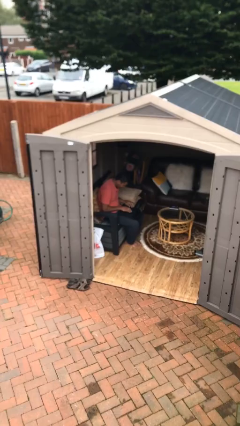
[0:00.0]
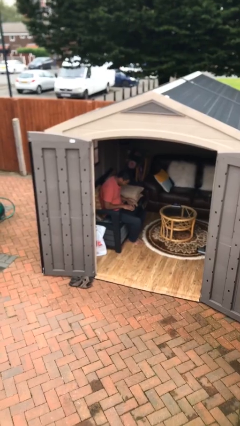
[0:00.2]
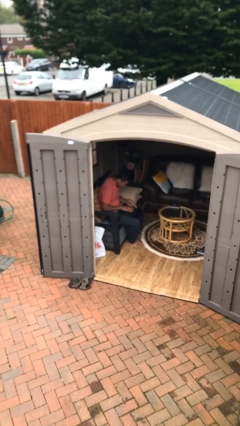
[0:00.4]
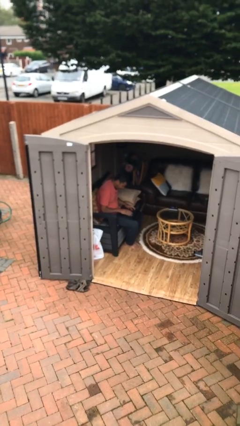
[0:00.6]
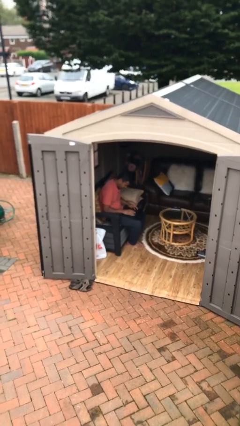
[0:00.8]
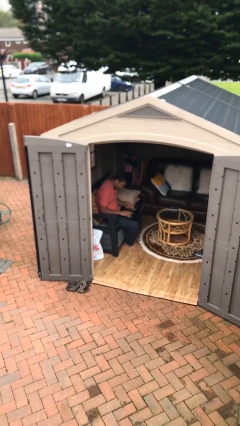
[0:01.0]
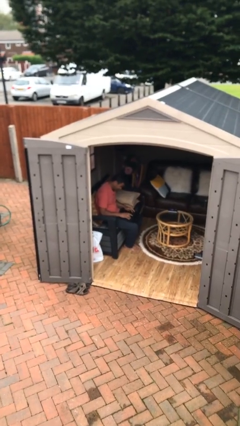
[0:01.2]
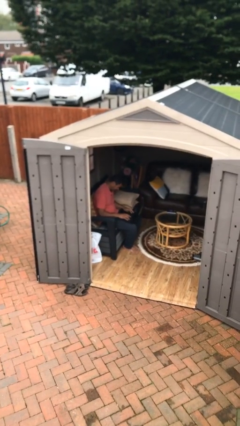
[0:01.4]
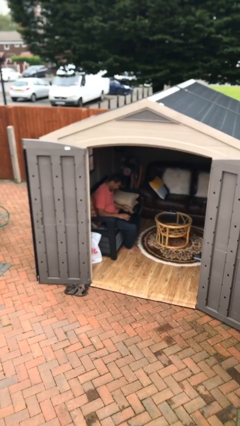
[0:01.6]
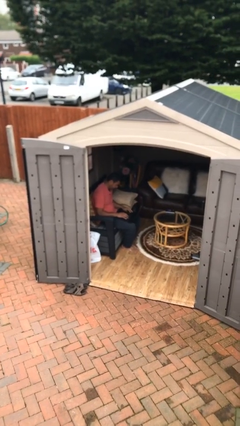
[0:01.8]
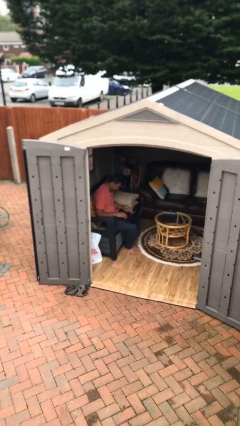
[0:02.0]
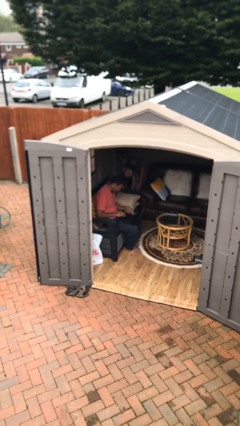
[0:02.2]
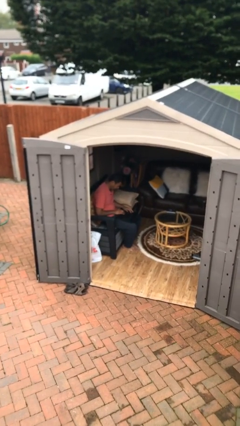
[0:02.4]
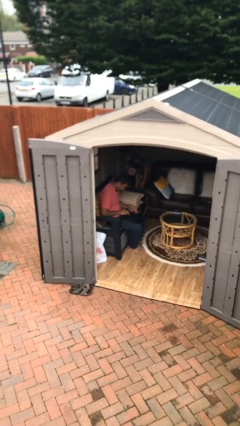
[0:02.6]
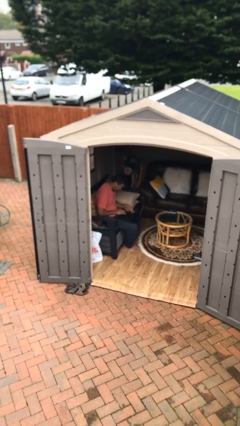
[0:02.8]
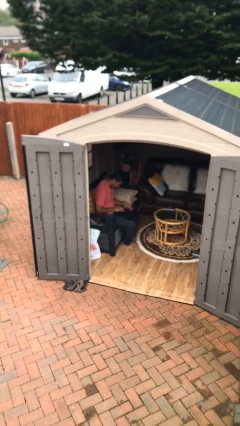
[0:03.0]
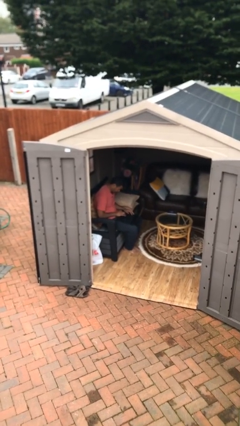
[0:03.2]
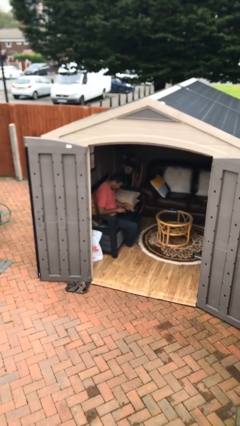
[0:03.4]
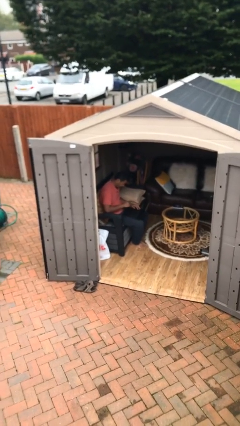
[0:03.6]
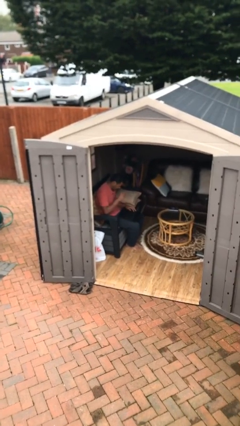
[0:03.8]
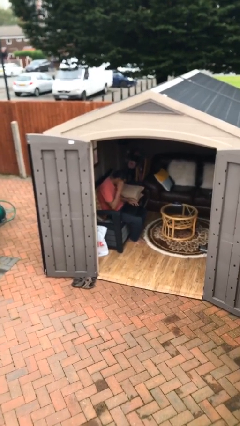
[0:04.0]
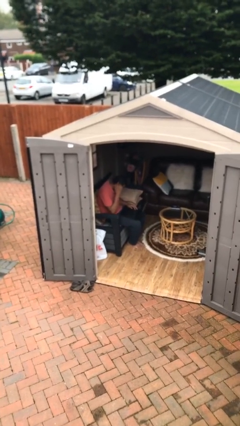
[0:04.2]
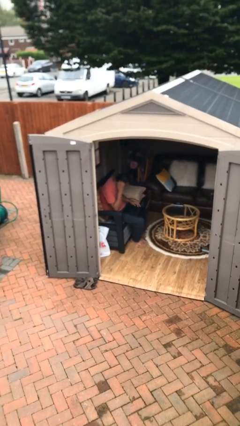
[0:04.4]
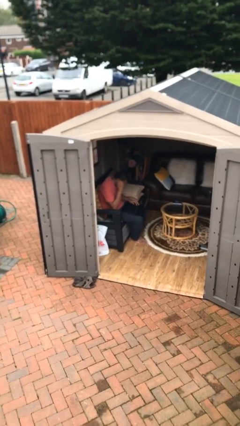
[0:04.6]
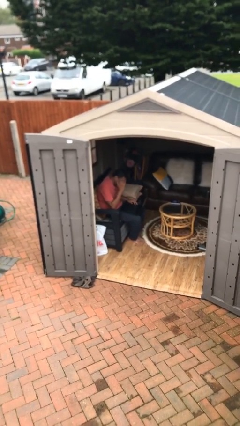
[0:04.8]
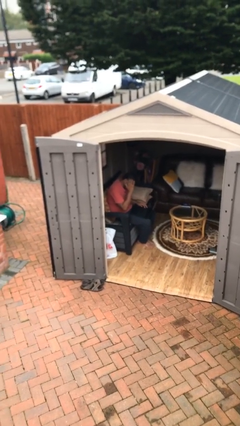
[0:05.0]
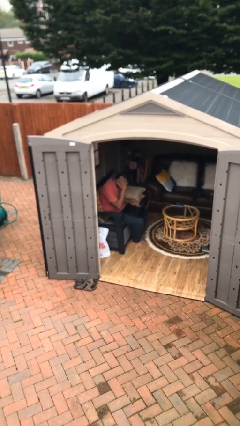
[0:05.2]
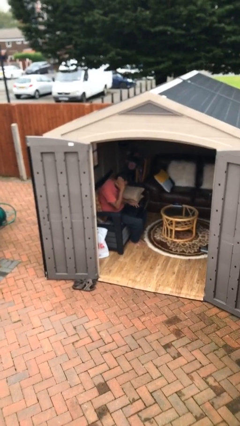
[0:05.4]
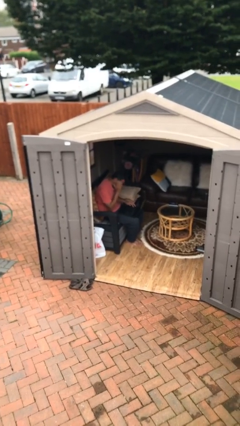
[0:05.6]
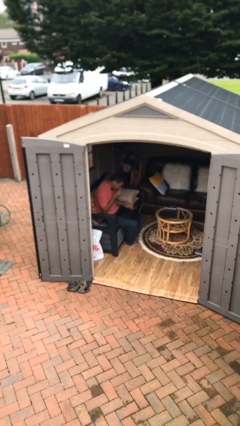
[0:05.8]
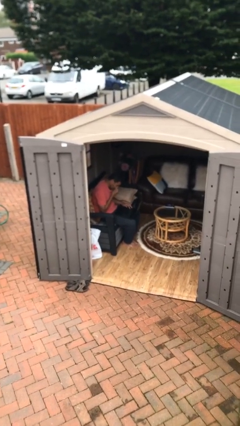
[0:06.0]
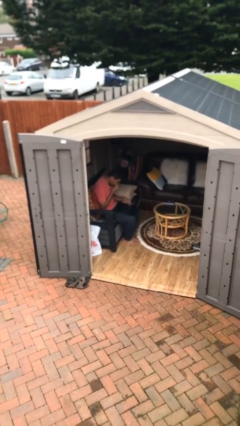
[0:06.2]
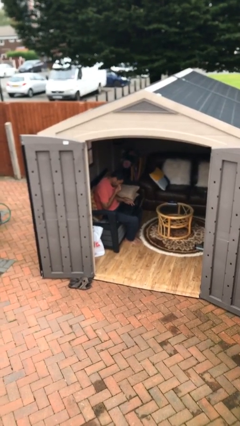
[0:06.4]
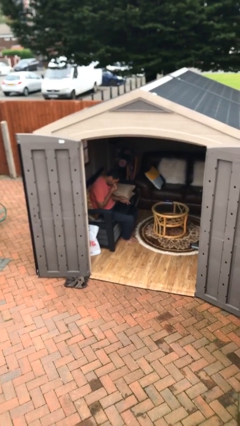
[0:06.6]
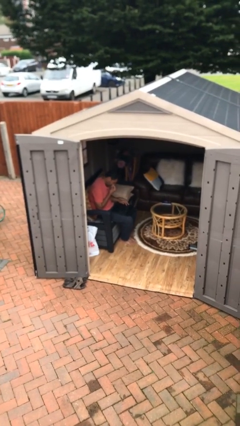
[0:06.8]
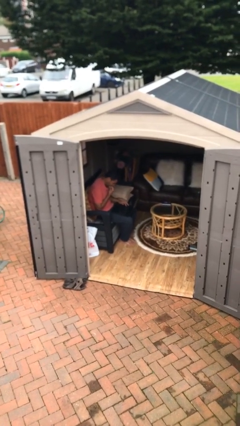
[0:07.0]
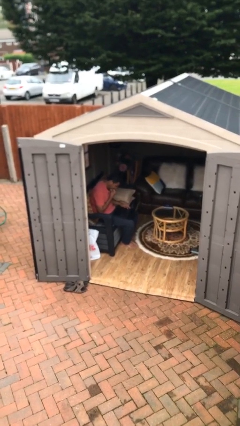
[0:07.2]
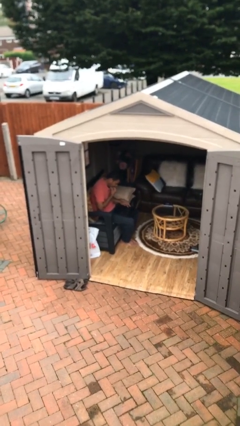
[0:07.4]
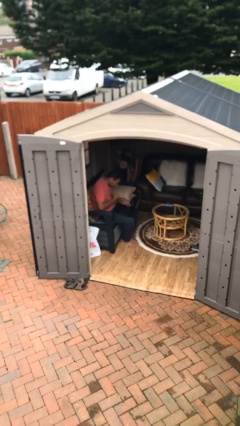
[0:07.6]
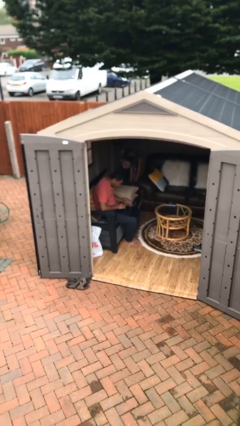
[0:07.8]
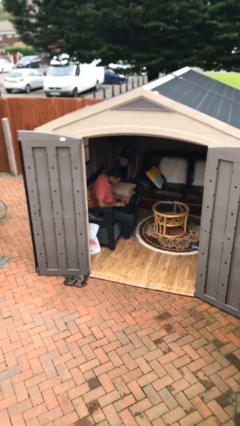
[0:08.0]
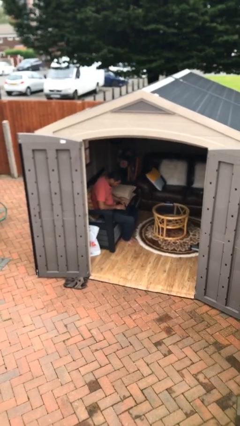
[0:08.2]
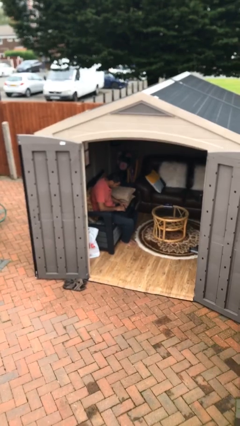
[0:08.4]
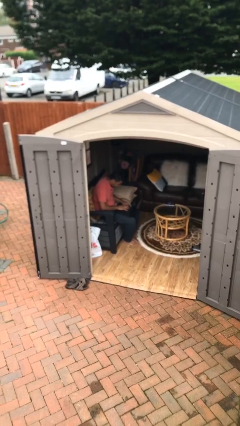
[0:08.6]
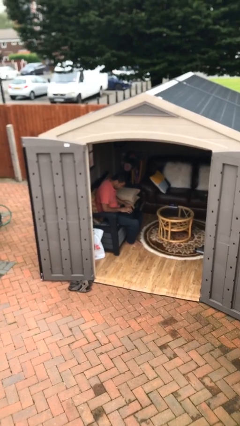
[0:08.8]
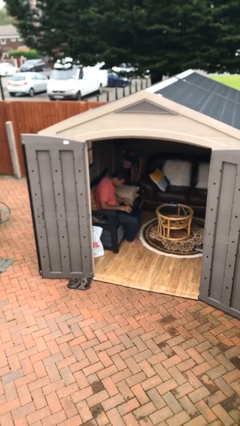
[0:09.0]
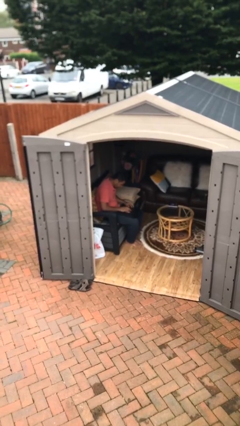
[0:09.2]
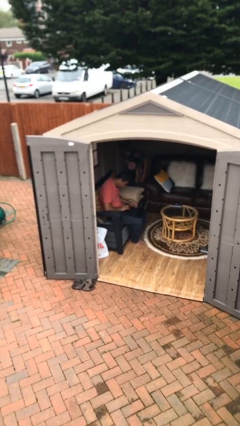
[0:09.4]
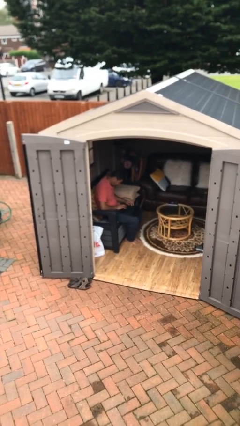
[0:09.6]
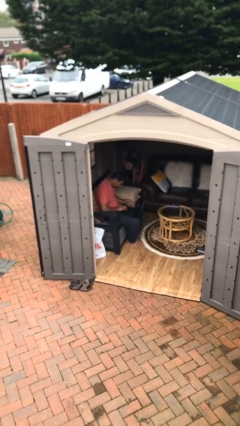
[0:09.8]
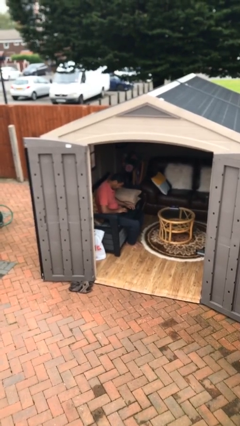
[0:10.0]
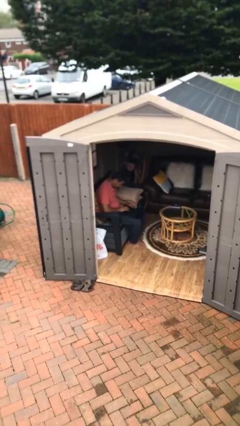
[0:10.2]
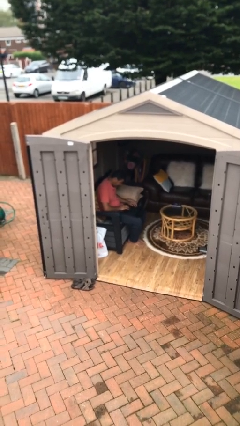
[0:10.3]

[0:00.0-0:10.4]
person interacts with laptop

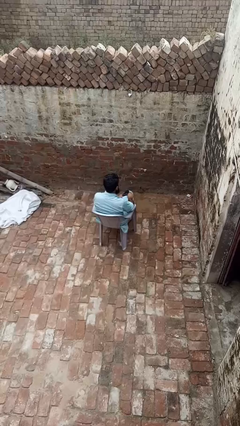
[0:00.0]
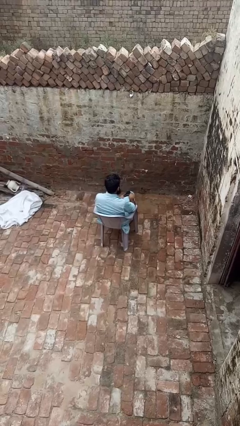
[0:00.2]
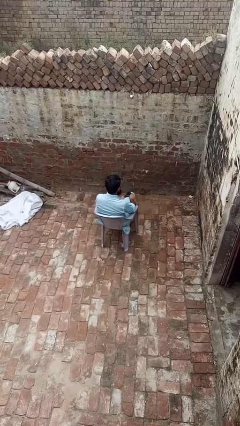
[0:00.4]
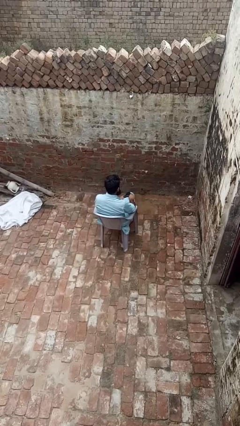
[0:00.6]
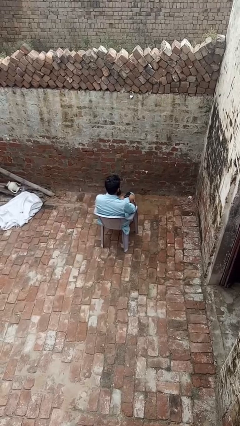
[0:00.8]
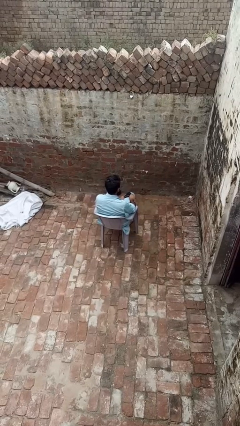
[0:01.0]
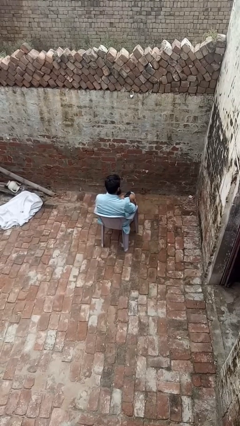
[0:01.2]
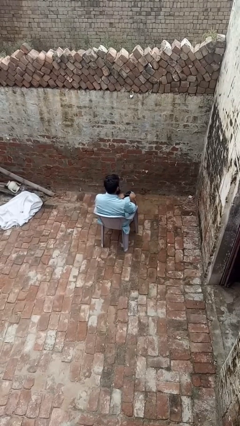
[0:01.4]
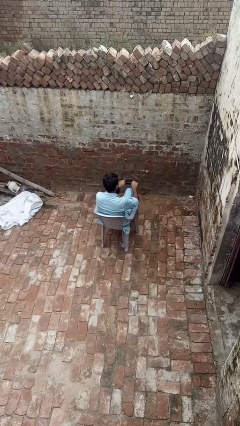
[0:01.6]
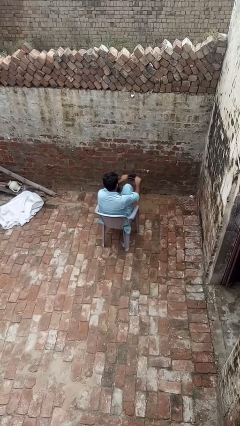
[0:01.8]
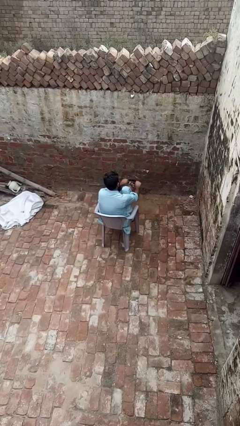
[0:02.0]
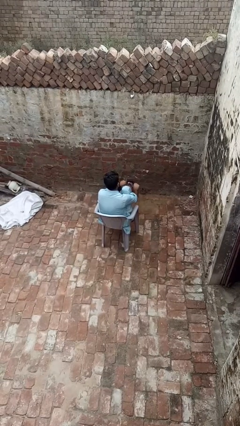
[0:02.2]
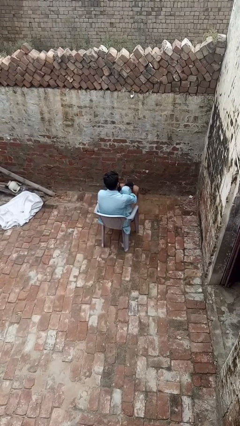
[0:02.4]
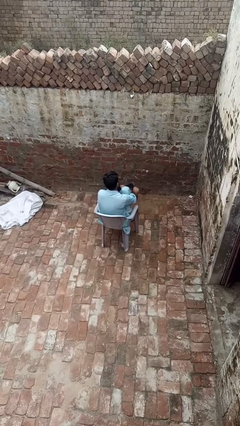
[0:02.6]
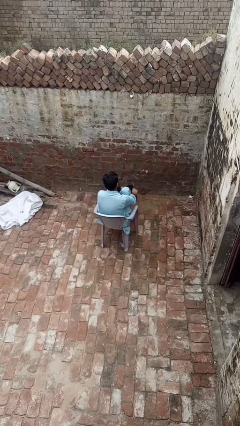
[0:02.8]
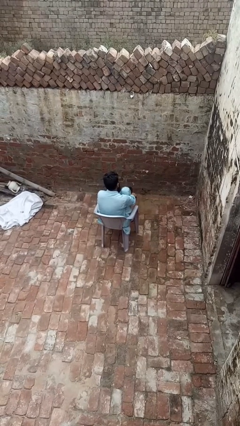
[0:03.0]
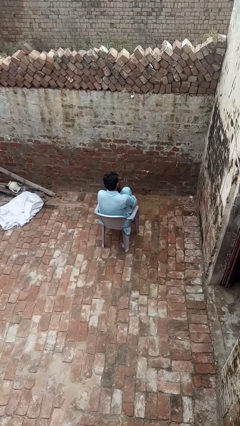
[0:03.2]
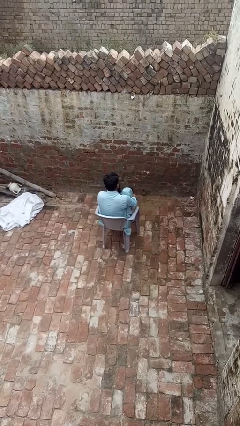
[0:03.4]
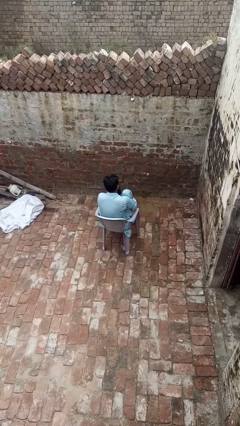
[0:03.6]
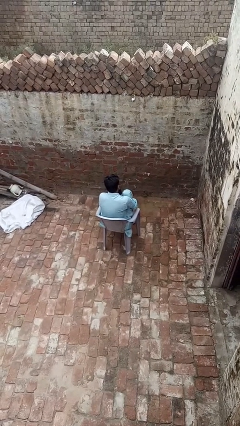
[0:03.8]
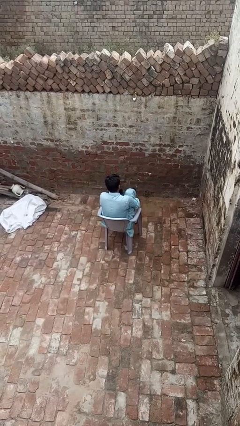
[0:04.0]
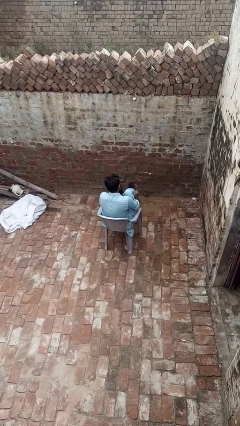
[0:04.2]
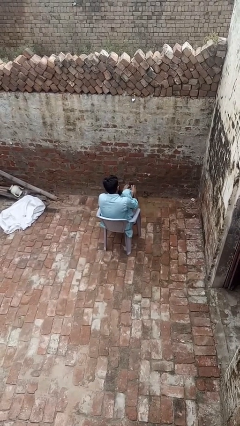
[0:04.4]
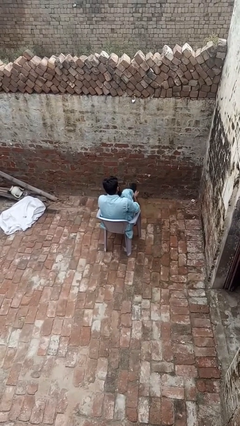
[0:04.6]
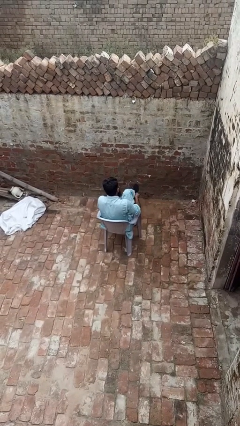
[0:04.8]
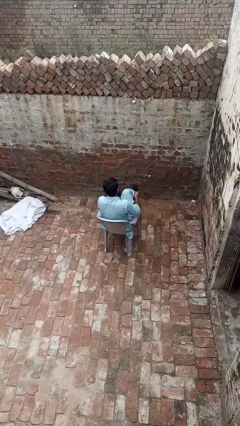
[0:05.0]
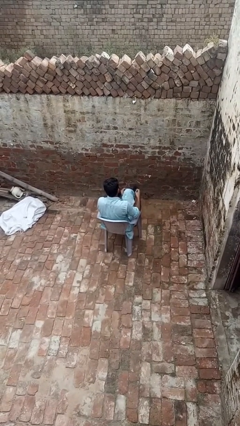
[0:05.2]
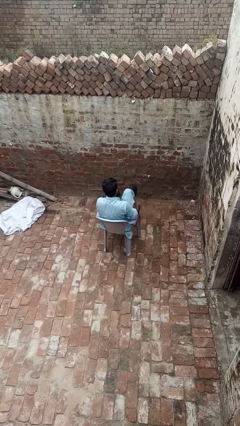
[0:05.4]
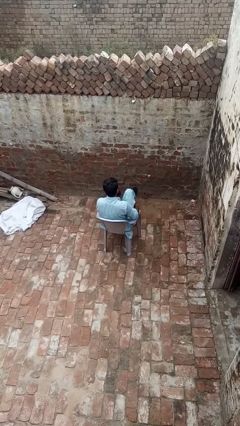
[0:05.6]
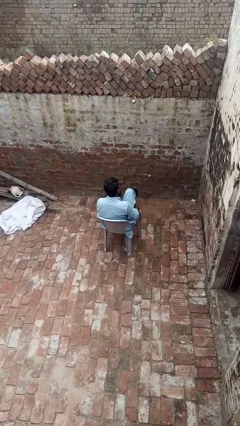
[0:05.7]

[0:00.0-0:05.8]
person puts on socks

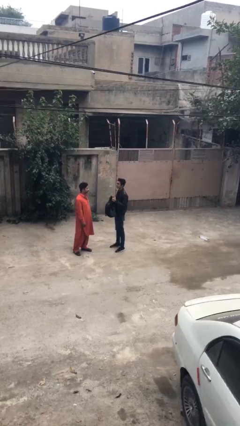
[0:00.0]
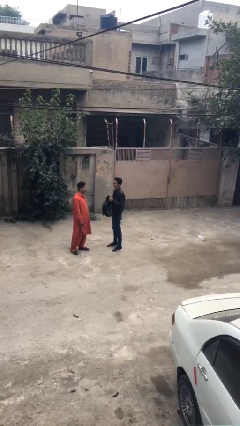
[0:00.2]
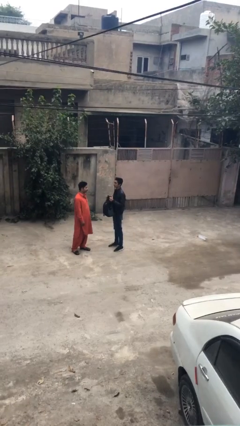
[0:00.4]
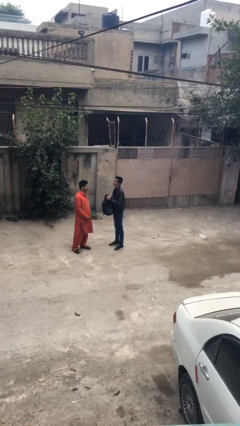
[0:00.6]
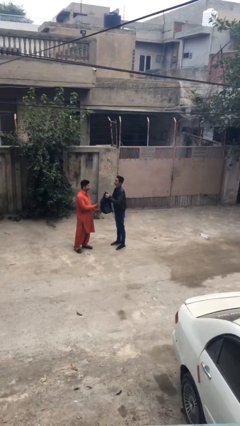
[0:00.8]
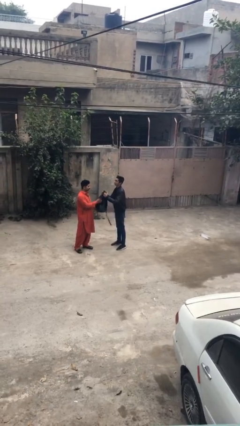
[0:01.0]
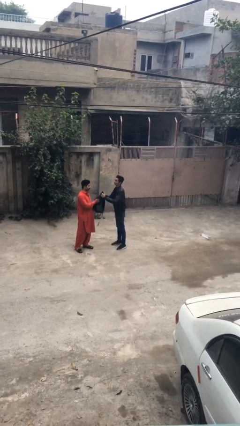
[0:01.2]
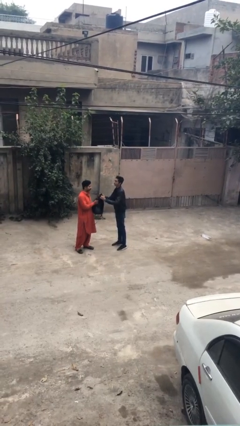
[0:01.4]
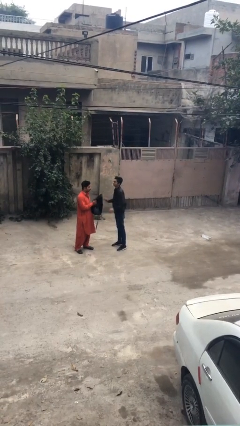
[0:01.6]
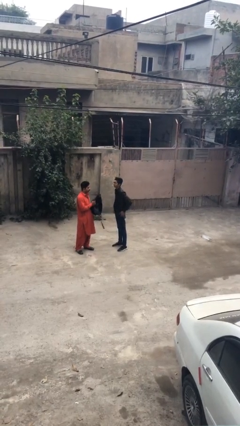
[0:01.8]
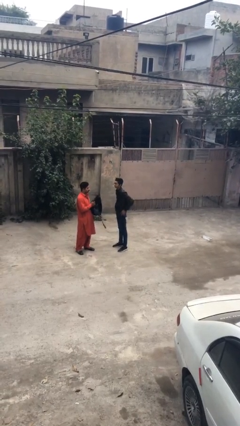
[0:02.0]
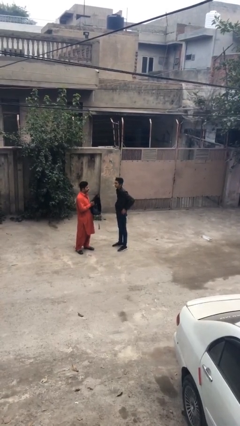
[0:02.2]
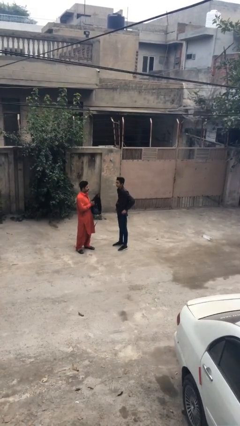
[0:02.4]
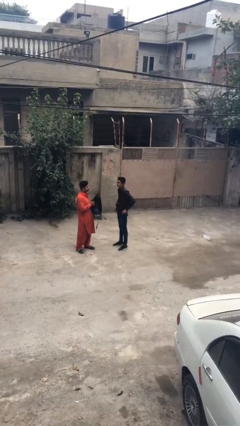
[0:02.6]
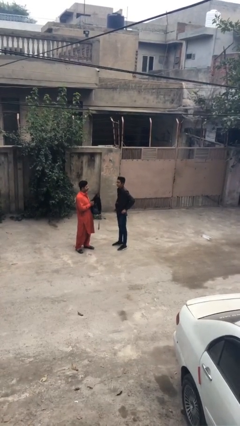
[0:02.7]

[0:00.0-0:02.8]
person transfers object to person
